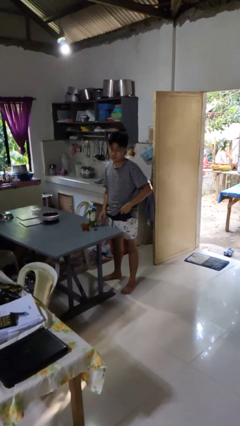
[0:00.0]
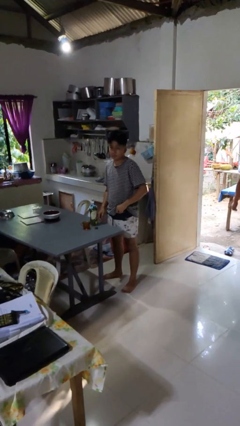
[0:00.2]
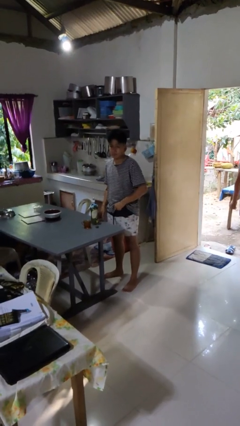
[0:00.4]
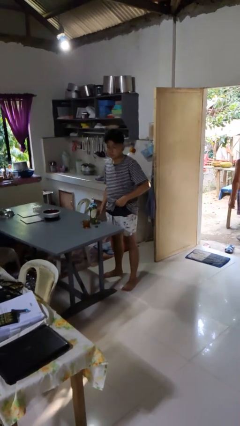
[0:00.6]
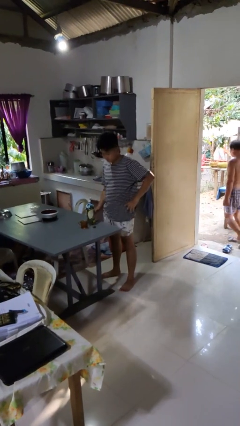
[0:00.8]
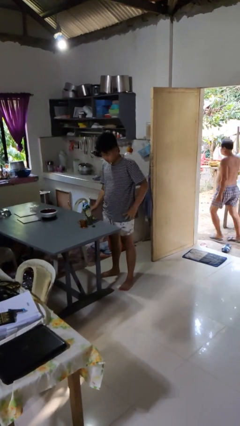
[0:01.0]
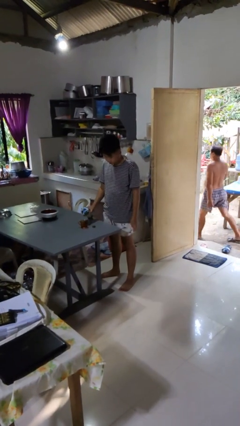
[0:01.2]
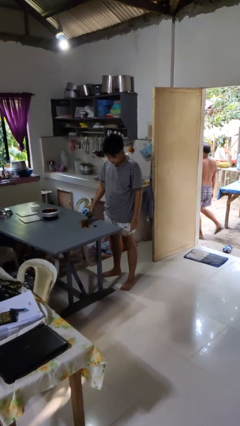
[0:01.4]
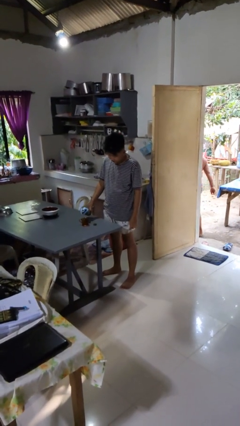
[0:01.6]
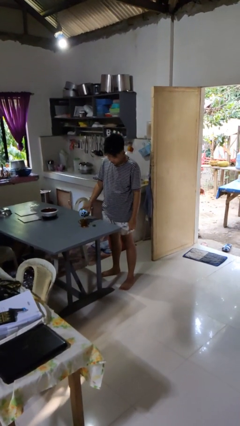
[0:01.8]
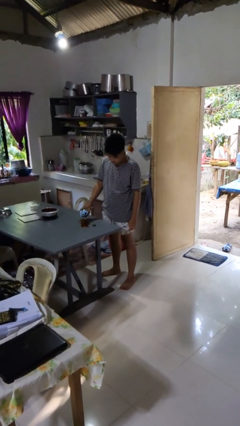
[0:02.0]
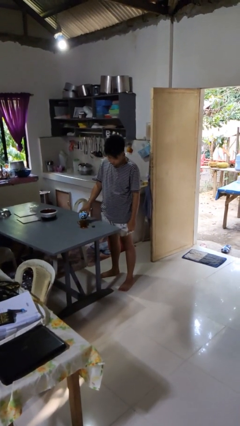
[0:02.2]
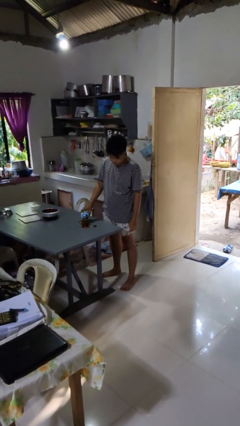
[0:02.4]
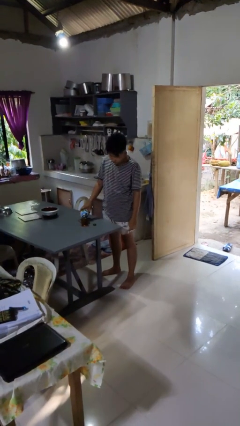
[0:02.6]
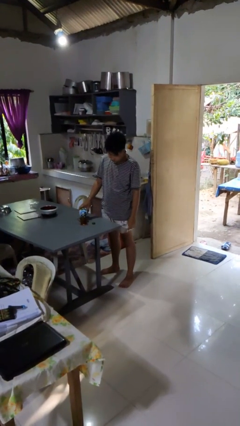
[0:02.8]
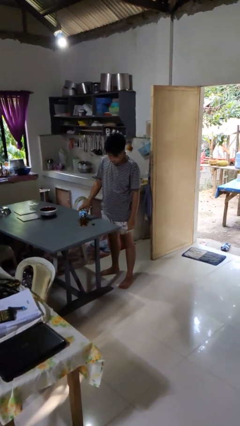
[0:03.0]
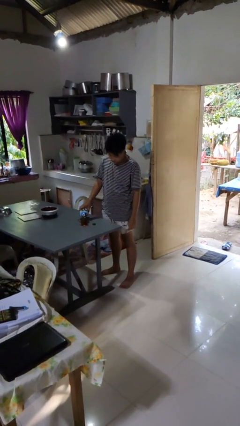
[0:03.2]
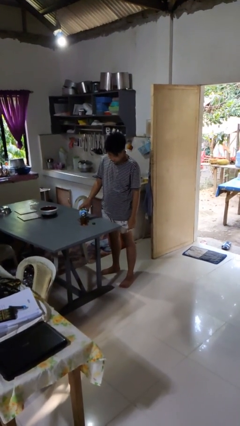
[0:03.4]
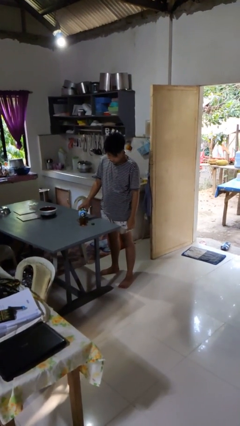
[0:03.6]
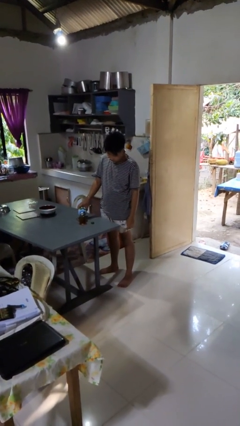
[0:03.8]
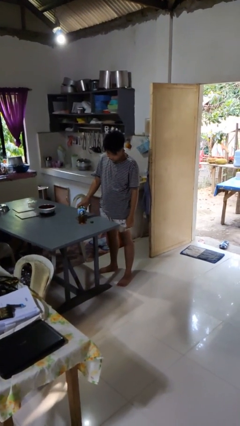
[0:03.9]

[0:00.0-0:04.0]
person pours liquid into cup

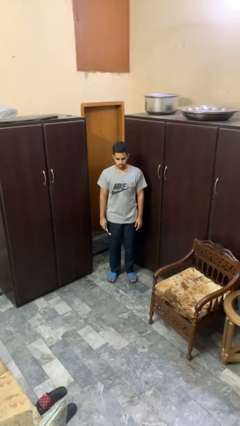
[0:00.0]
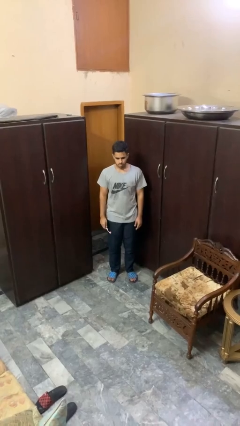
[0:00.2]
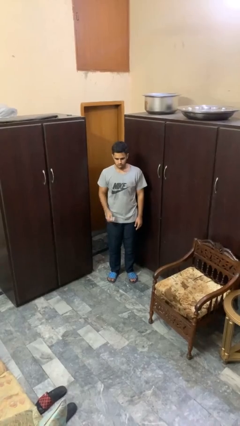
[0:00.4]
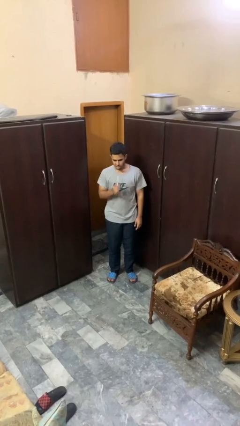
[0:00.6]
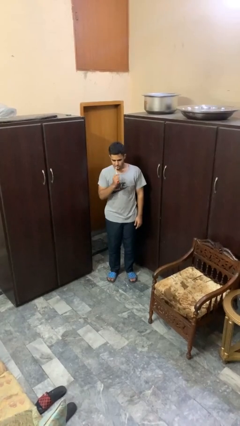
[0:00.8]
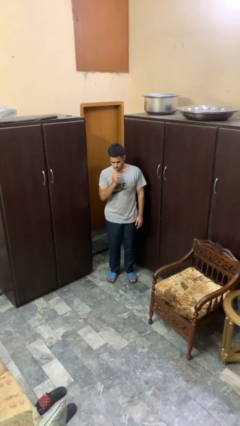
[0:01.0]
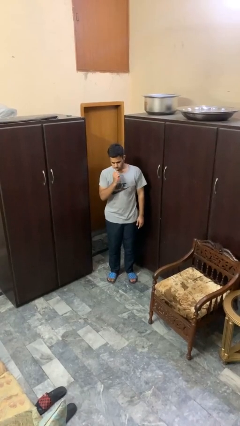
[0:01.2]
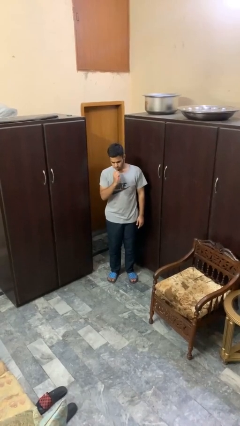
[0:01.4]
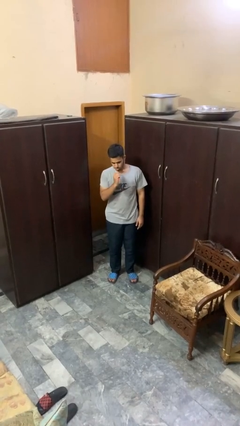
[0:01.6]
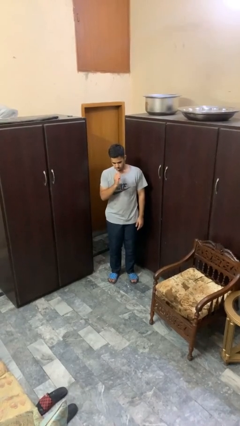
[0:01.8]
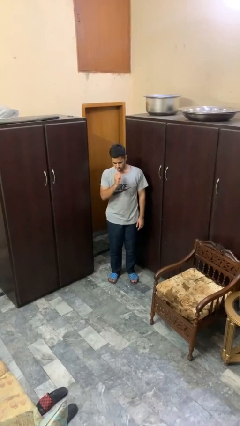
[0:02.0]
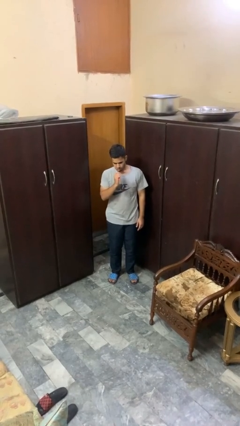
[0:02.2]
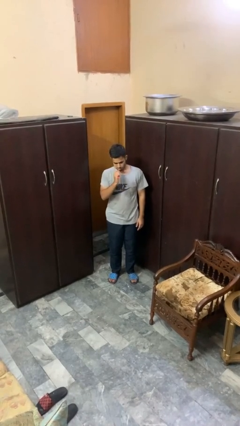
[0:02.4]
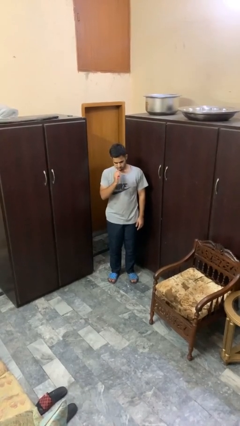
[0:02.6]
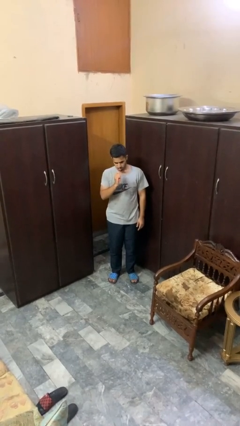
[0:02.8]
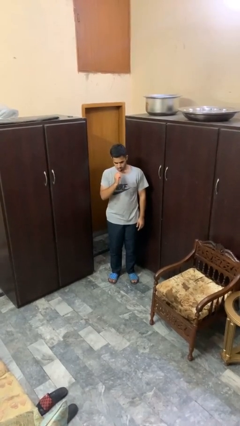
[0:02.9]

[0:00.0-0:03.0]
person brushes teeth

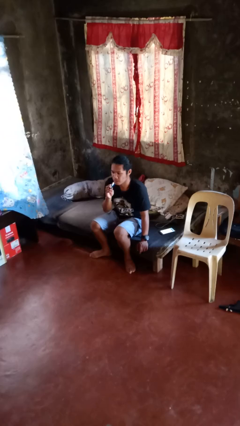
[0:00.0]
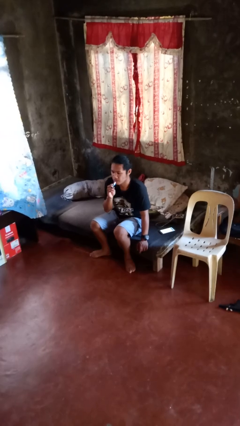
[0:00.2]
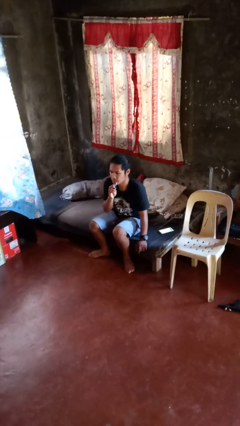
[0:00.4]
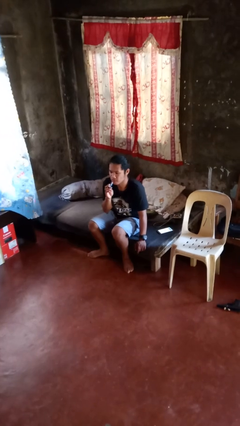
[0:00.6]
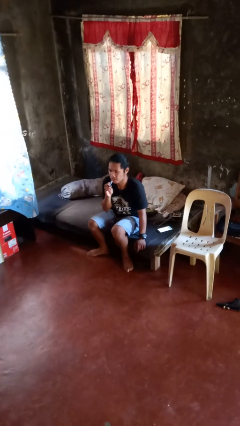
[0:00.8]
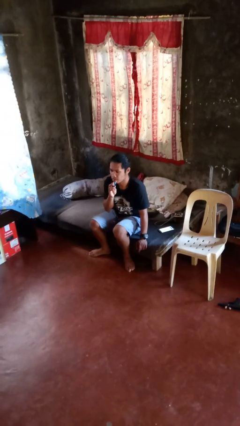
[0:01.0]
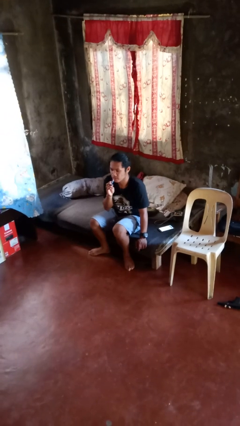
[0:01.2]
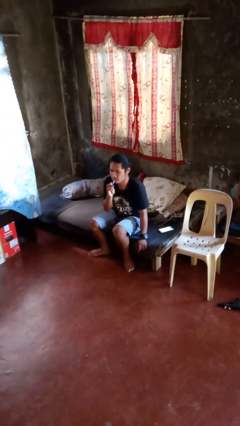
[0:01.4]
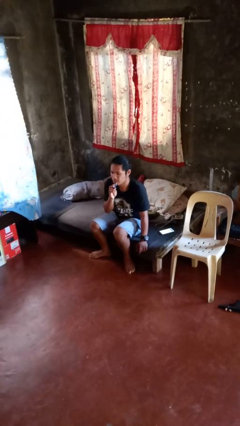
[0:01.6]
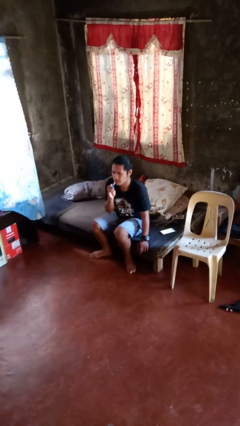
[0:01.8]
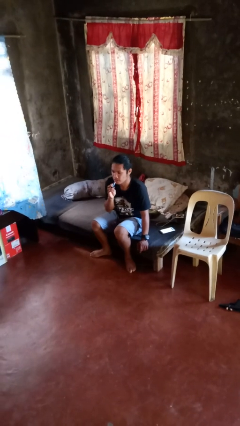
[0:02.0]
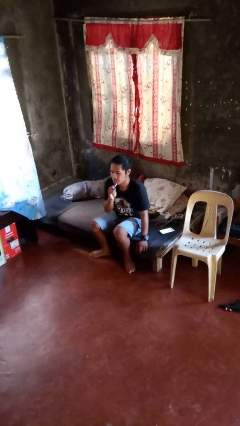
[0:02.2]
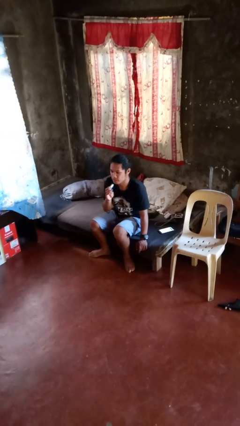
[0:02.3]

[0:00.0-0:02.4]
person applies lip makeup

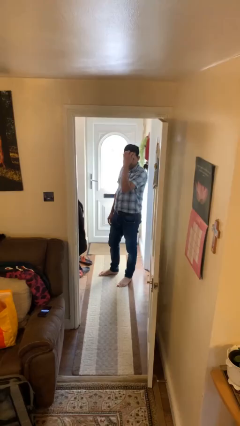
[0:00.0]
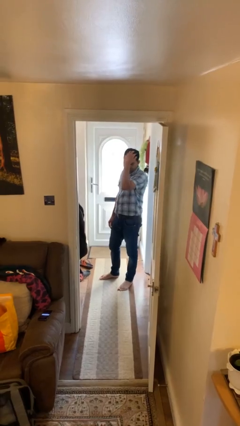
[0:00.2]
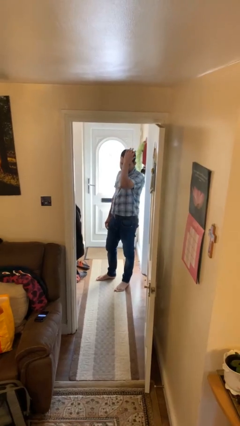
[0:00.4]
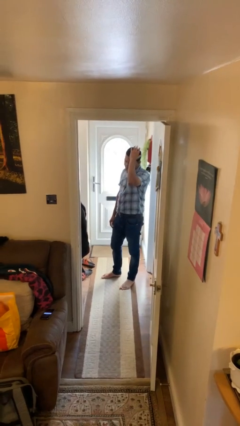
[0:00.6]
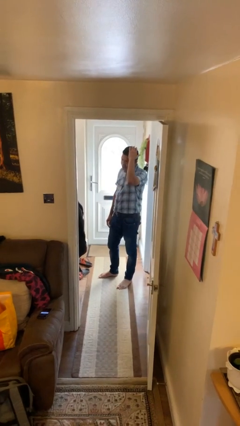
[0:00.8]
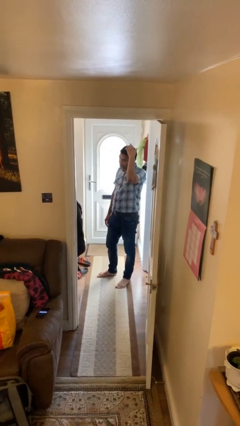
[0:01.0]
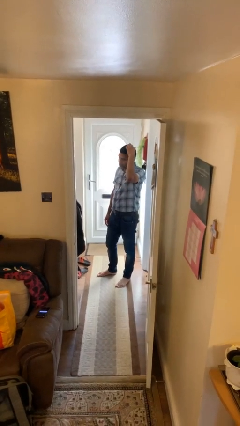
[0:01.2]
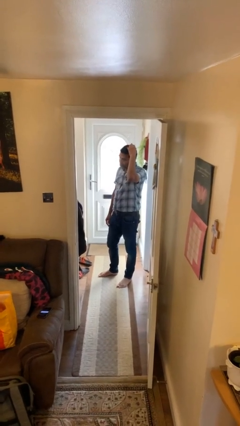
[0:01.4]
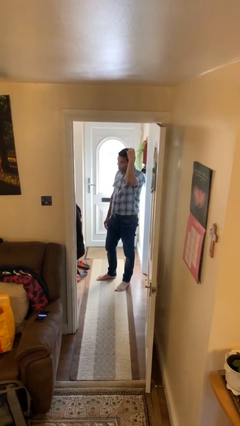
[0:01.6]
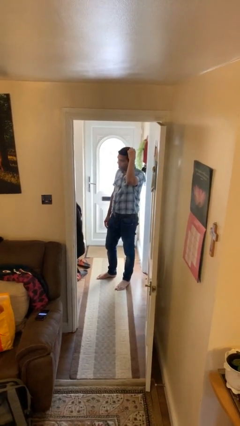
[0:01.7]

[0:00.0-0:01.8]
person strokes hair

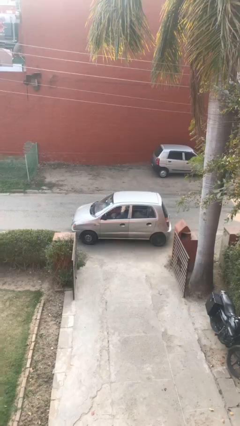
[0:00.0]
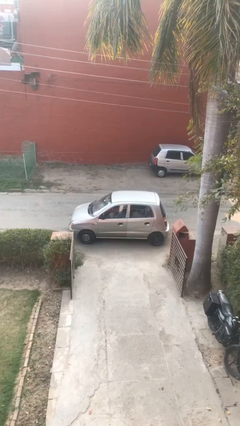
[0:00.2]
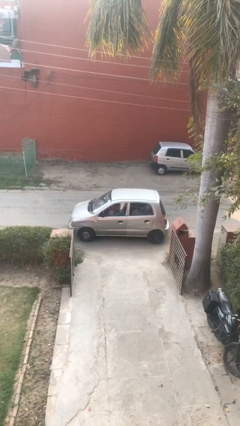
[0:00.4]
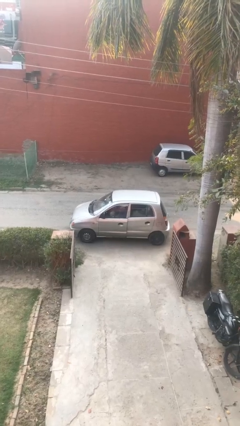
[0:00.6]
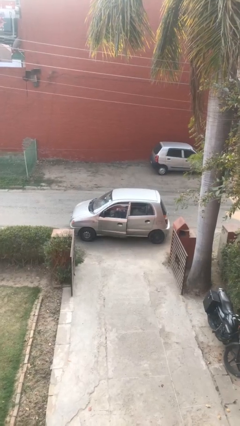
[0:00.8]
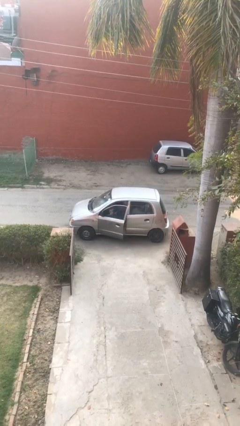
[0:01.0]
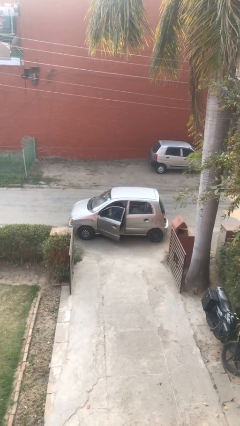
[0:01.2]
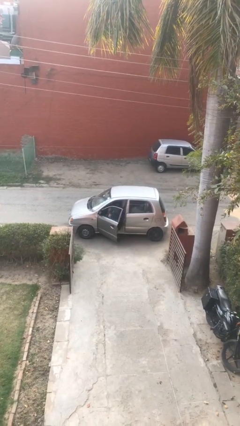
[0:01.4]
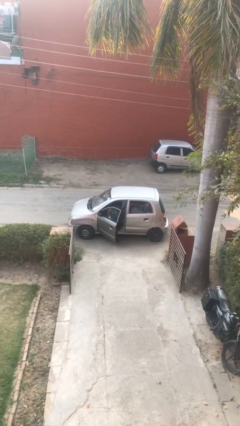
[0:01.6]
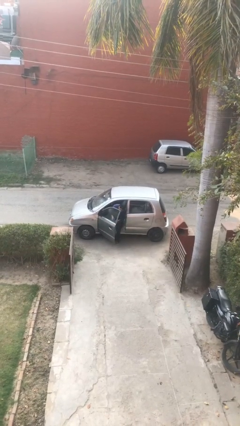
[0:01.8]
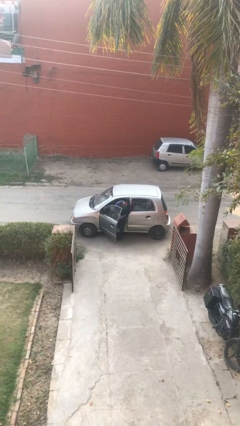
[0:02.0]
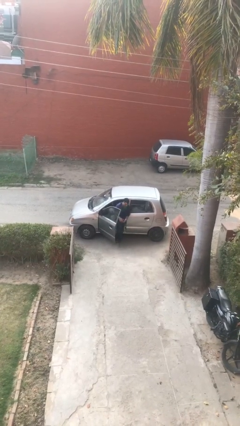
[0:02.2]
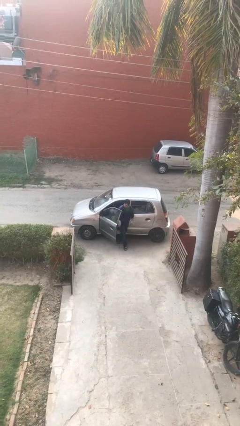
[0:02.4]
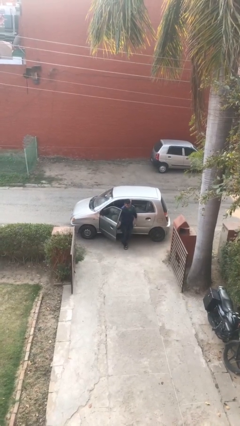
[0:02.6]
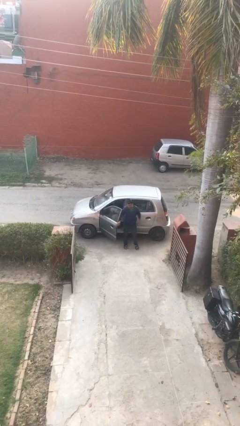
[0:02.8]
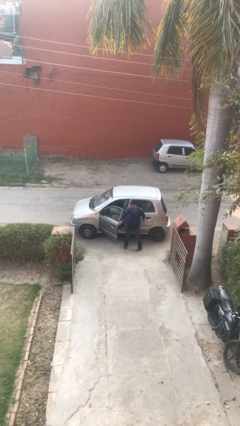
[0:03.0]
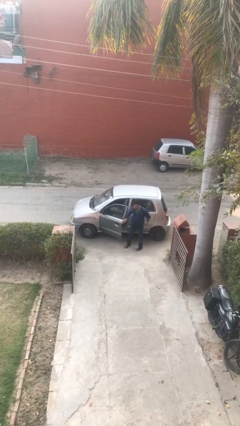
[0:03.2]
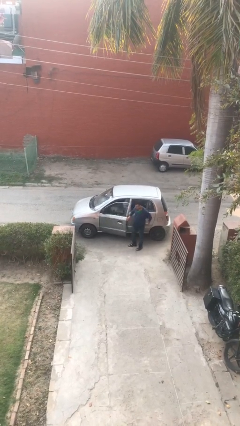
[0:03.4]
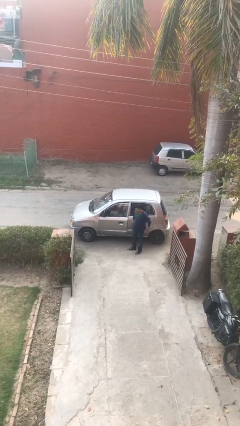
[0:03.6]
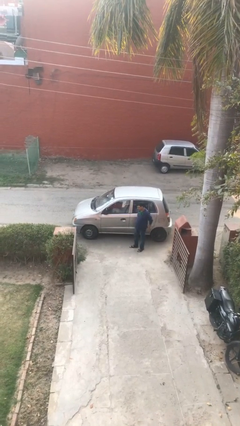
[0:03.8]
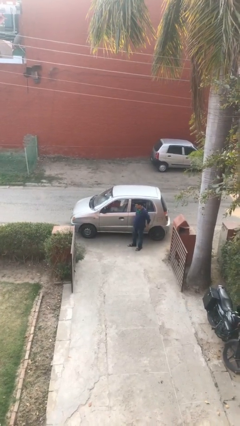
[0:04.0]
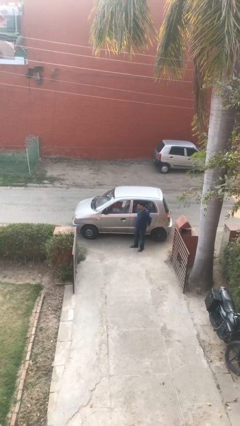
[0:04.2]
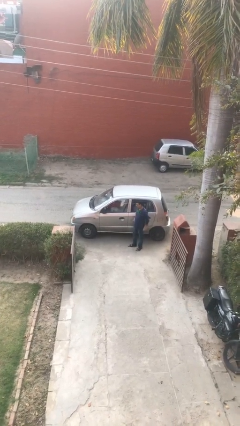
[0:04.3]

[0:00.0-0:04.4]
car drops off person

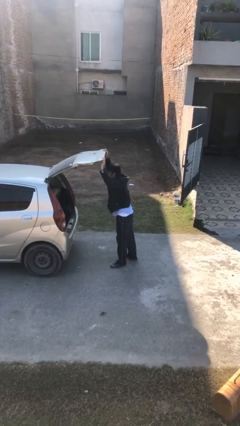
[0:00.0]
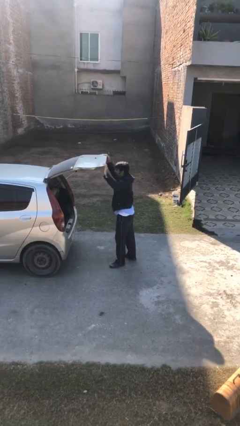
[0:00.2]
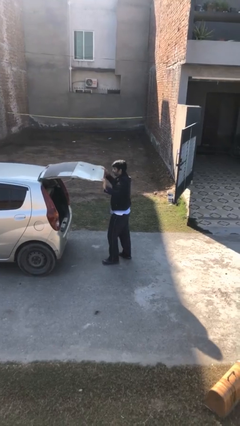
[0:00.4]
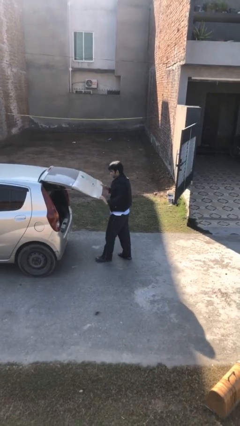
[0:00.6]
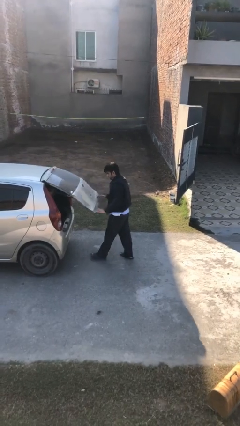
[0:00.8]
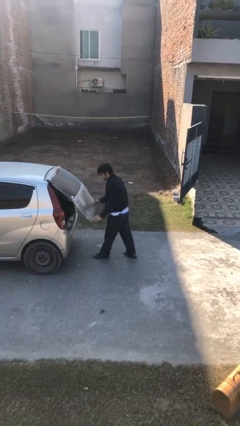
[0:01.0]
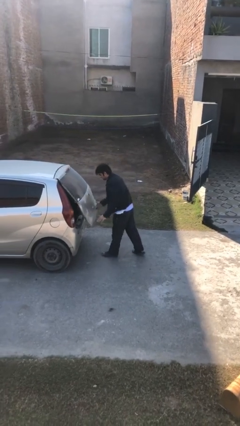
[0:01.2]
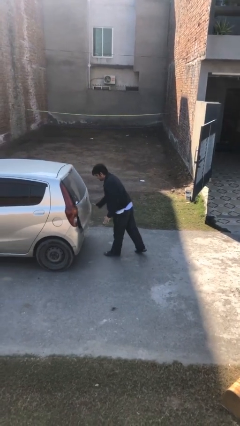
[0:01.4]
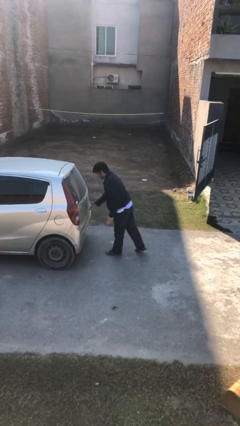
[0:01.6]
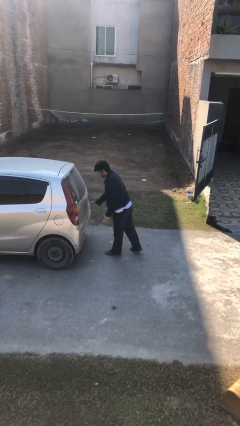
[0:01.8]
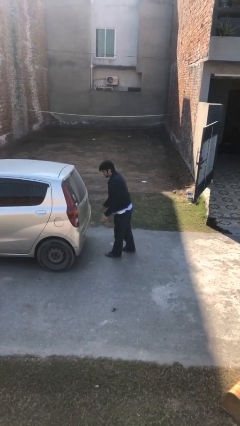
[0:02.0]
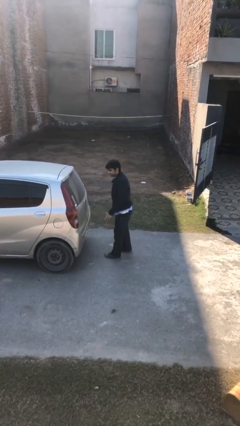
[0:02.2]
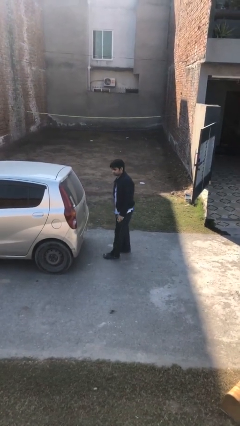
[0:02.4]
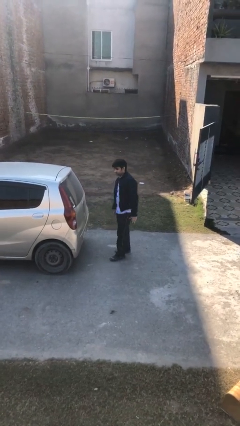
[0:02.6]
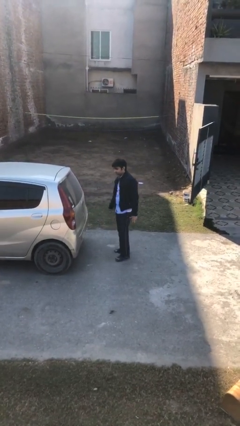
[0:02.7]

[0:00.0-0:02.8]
person closes car trunk
